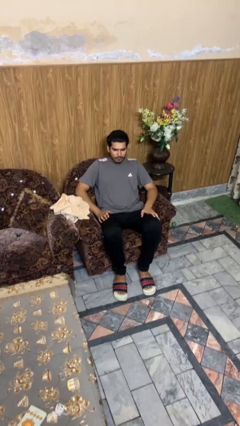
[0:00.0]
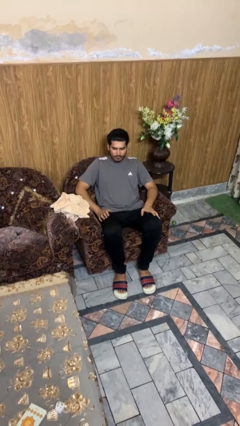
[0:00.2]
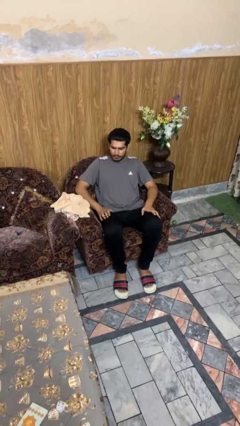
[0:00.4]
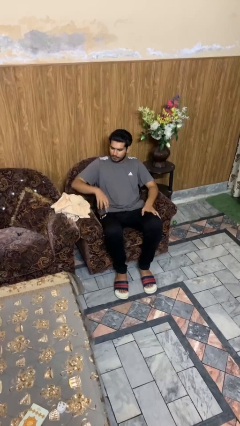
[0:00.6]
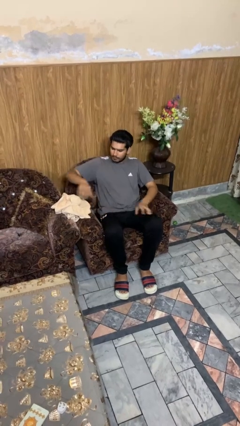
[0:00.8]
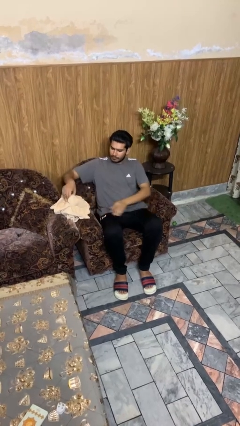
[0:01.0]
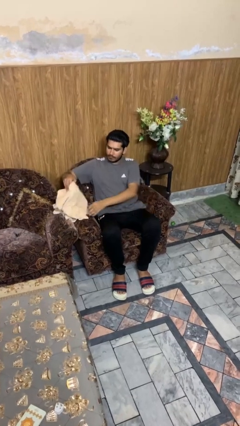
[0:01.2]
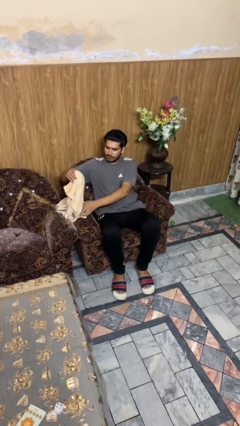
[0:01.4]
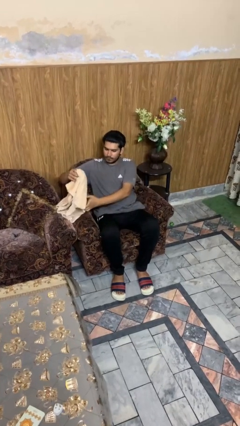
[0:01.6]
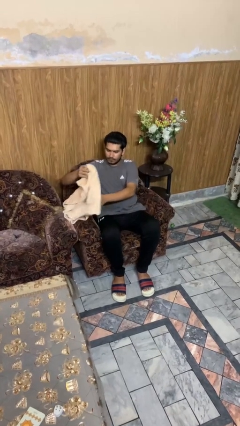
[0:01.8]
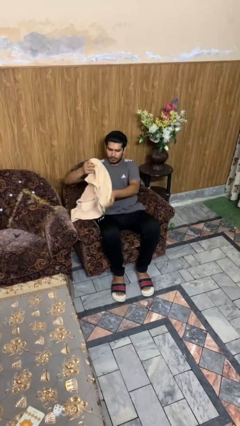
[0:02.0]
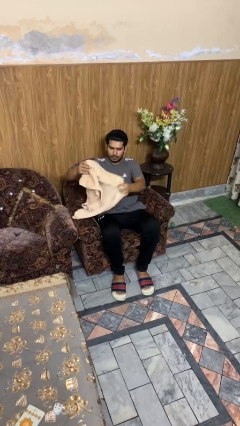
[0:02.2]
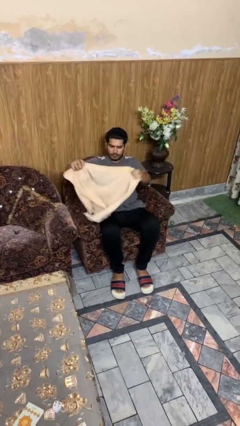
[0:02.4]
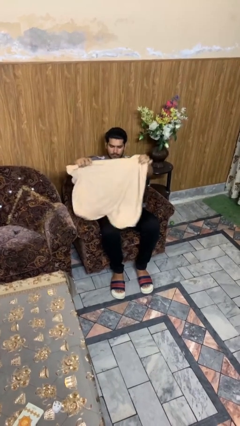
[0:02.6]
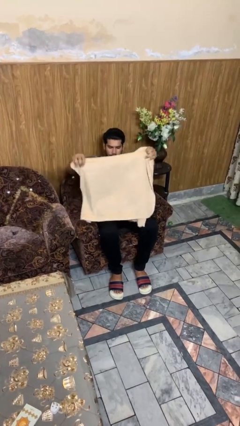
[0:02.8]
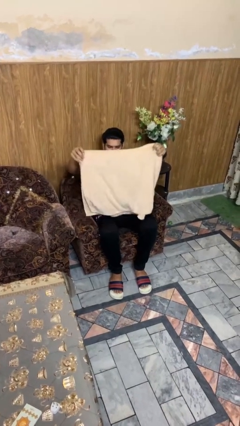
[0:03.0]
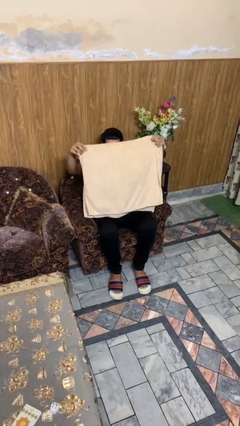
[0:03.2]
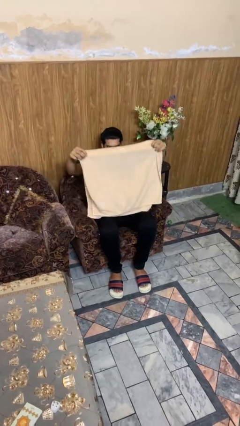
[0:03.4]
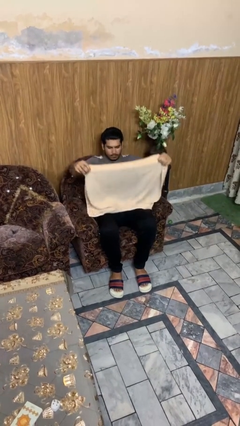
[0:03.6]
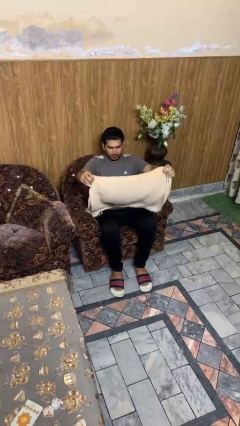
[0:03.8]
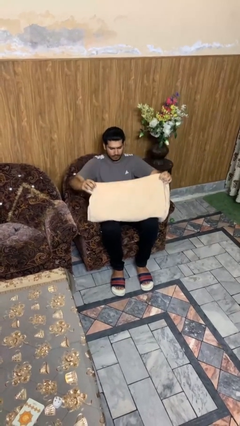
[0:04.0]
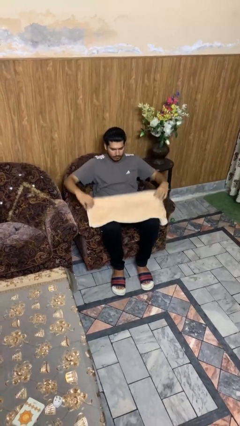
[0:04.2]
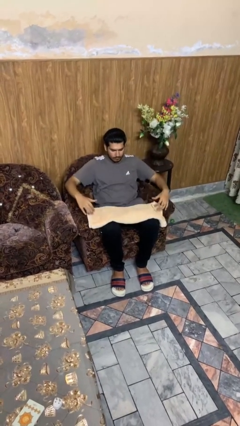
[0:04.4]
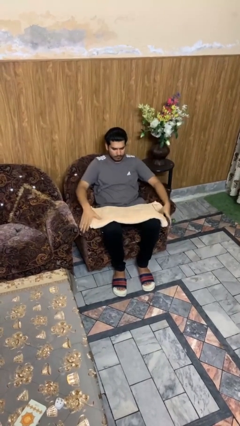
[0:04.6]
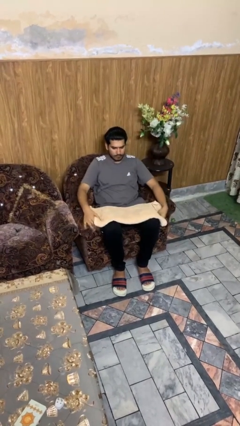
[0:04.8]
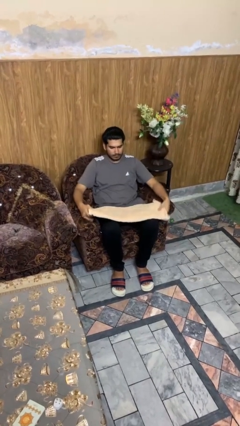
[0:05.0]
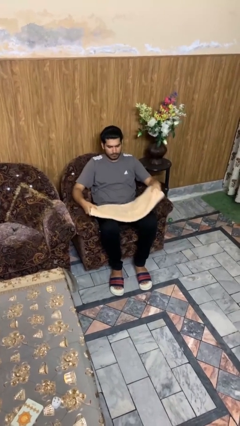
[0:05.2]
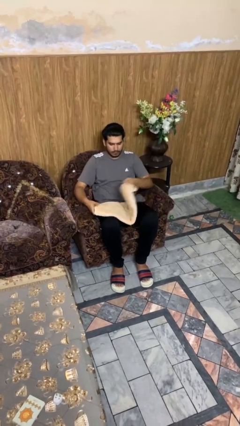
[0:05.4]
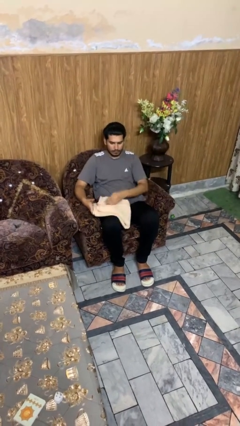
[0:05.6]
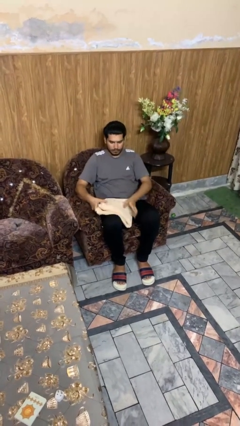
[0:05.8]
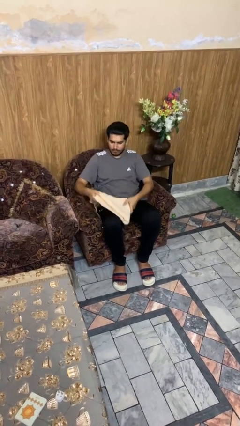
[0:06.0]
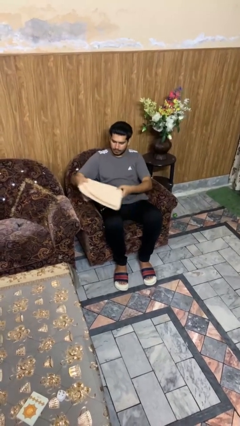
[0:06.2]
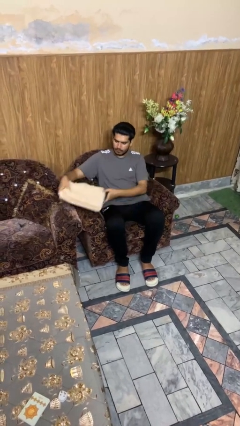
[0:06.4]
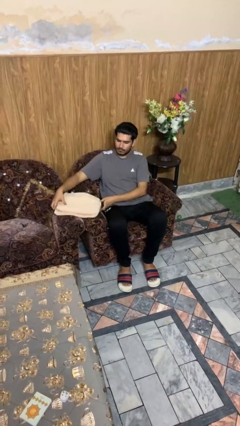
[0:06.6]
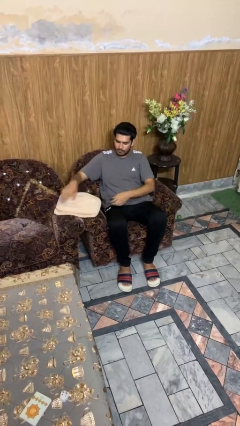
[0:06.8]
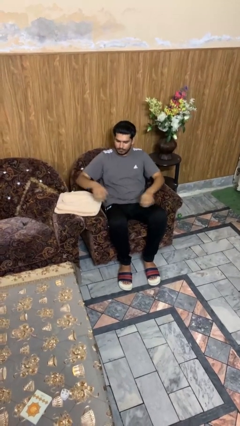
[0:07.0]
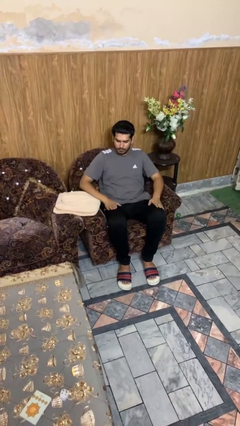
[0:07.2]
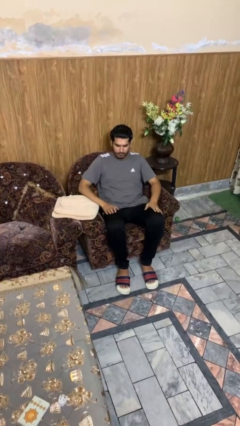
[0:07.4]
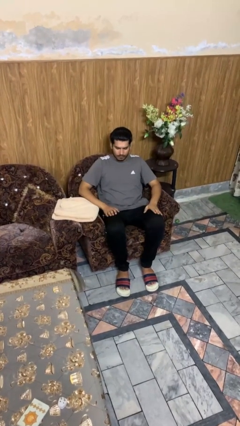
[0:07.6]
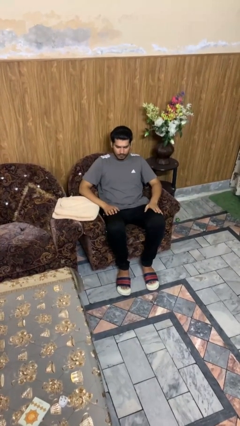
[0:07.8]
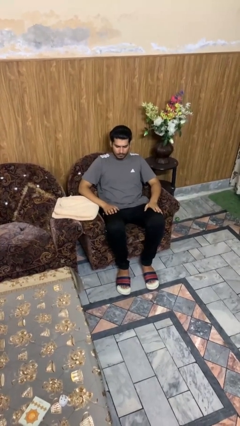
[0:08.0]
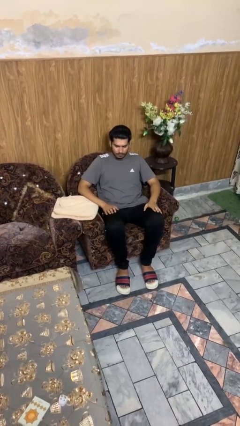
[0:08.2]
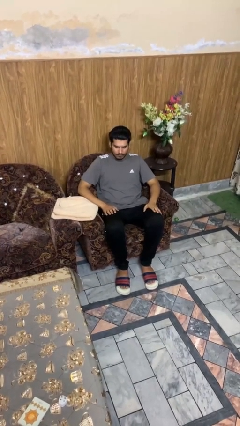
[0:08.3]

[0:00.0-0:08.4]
person folds towel

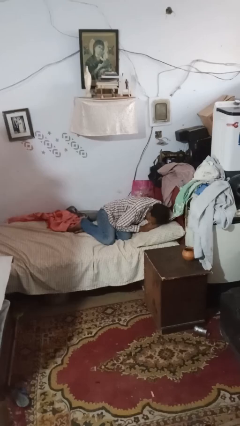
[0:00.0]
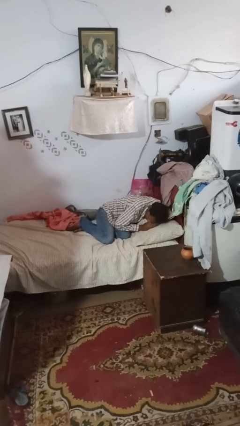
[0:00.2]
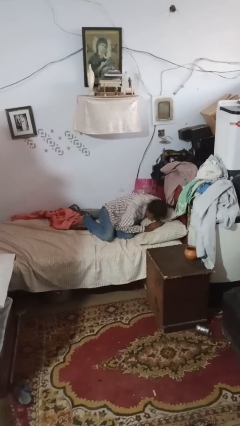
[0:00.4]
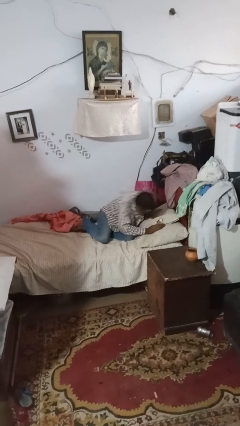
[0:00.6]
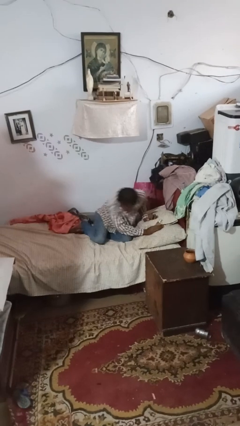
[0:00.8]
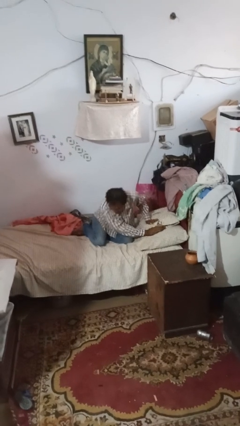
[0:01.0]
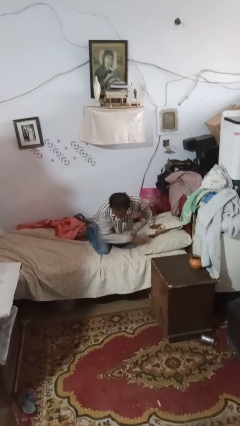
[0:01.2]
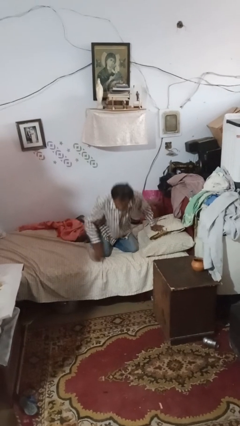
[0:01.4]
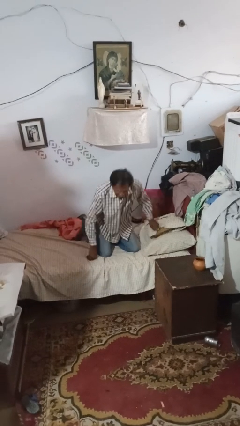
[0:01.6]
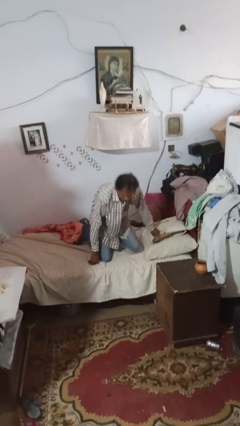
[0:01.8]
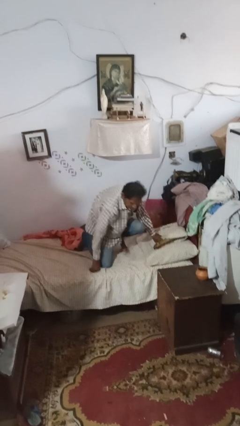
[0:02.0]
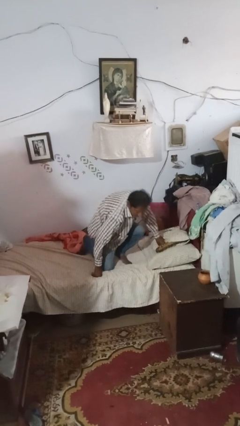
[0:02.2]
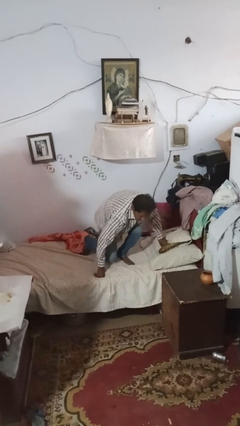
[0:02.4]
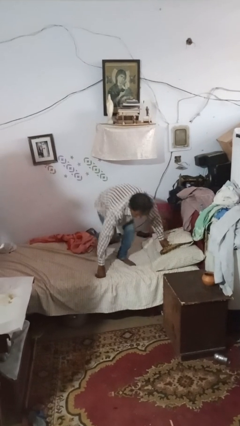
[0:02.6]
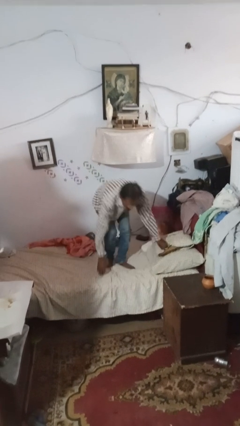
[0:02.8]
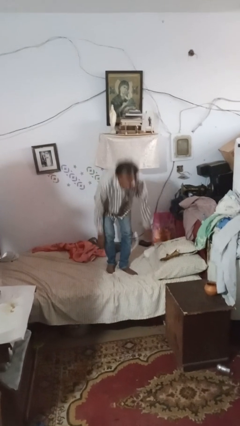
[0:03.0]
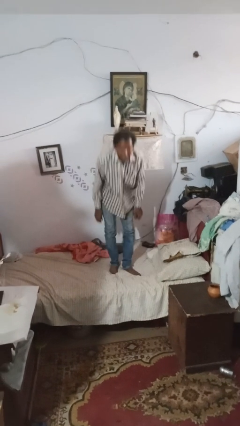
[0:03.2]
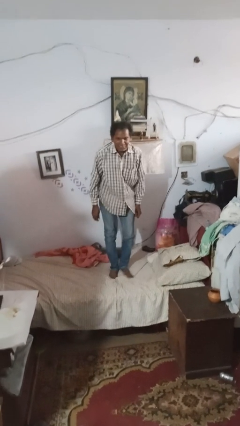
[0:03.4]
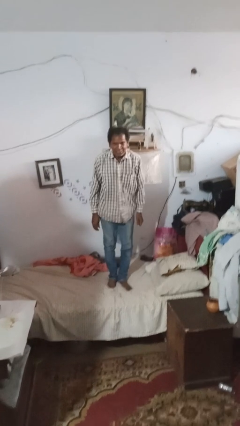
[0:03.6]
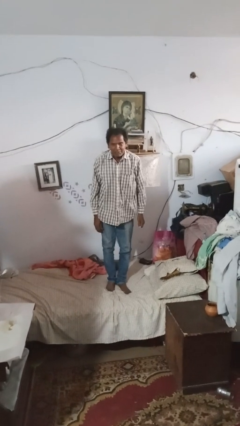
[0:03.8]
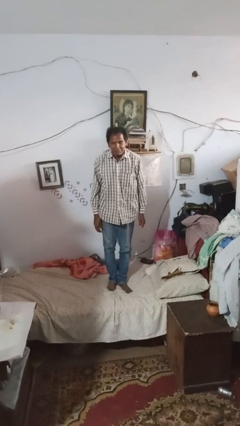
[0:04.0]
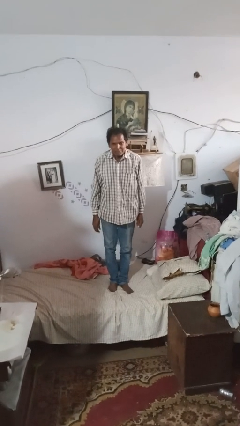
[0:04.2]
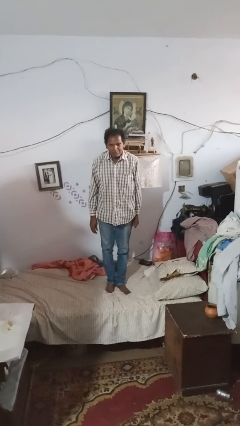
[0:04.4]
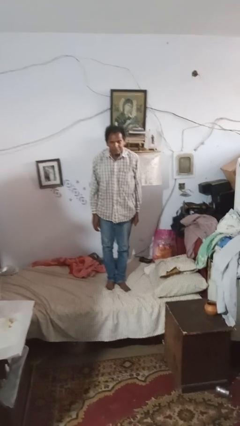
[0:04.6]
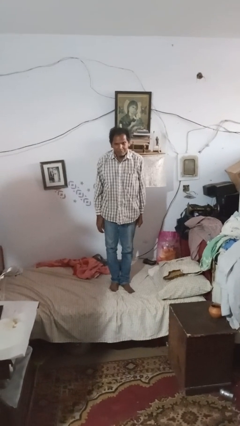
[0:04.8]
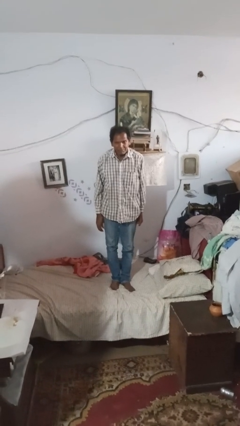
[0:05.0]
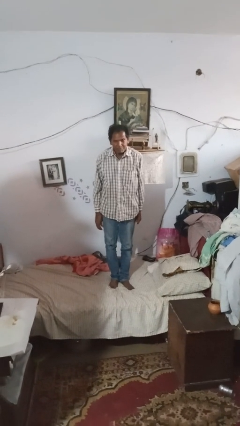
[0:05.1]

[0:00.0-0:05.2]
person stands up

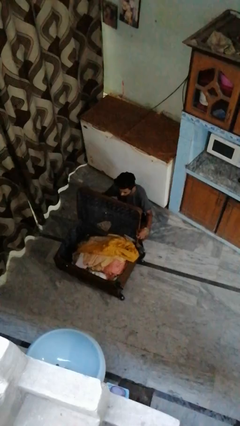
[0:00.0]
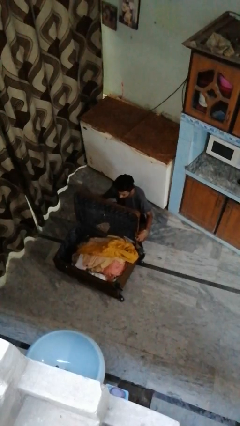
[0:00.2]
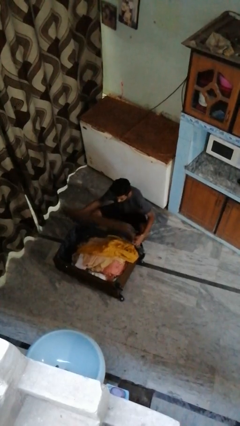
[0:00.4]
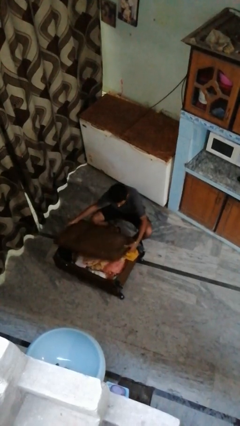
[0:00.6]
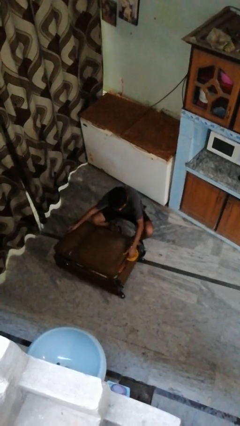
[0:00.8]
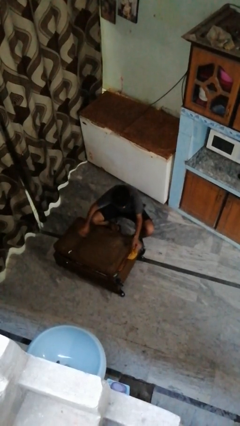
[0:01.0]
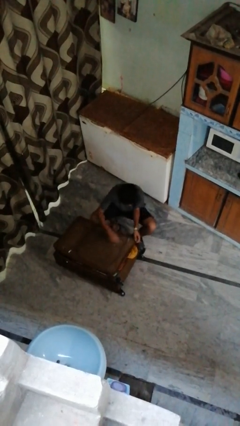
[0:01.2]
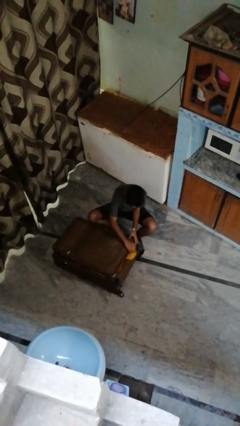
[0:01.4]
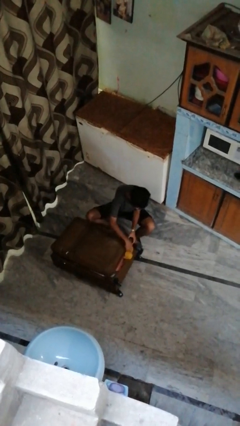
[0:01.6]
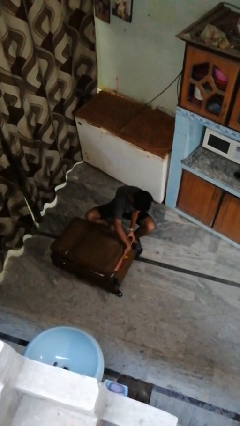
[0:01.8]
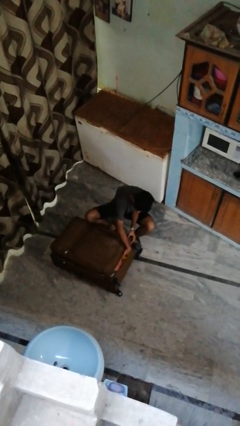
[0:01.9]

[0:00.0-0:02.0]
person closes suitcase

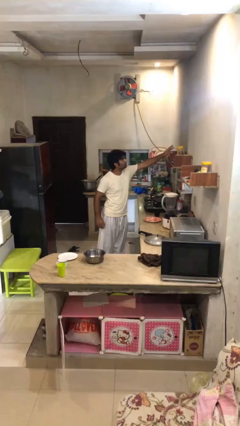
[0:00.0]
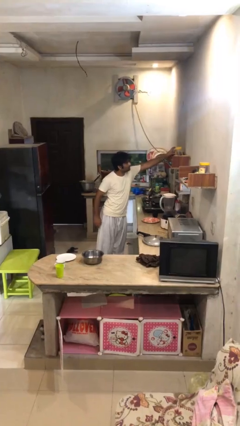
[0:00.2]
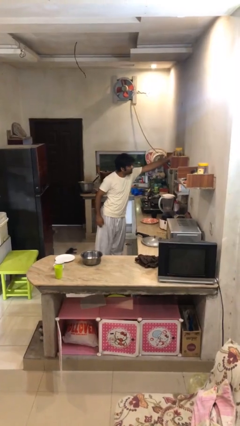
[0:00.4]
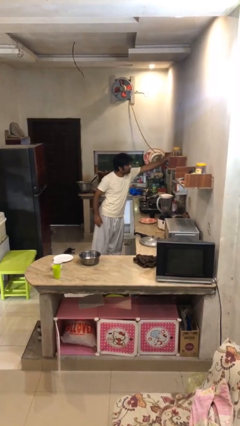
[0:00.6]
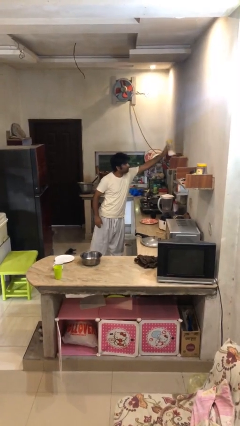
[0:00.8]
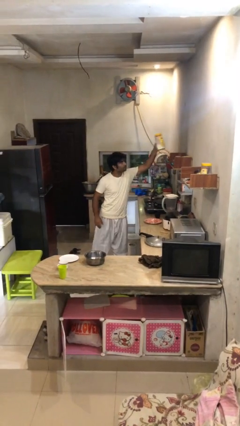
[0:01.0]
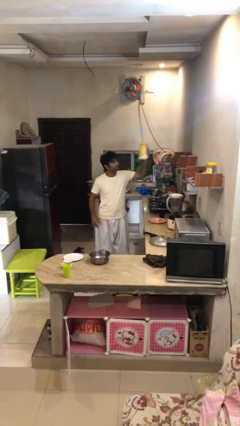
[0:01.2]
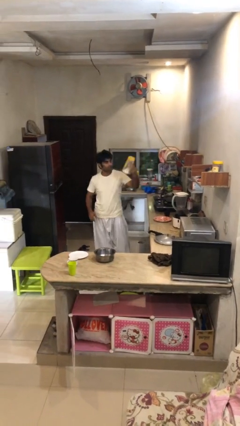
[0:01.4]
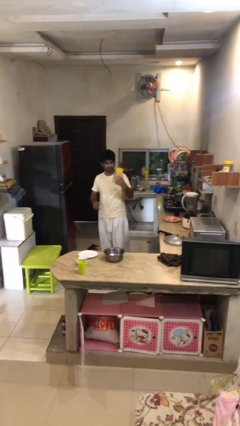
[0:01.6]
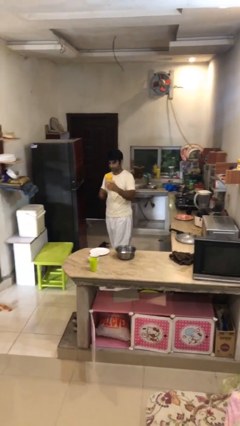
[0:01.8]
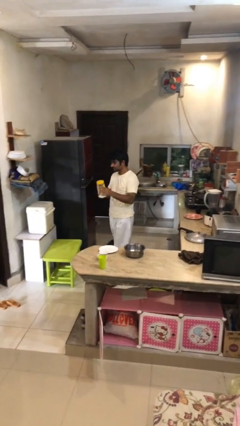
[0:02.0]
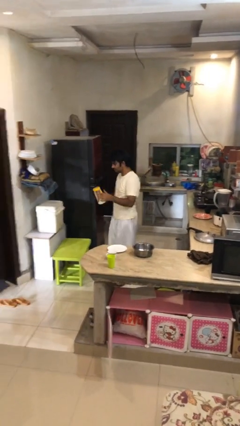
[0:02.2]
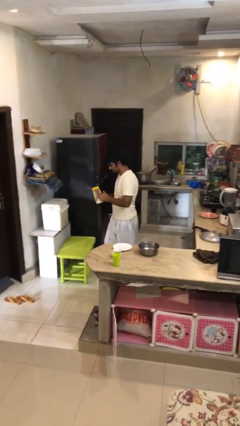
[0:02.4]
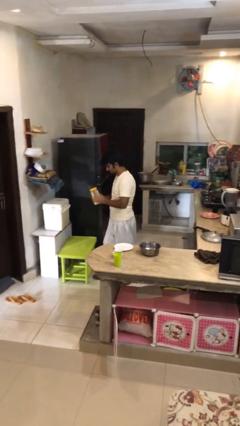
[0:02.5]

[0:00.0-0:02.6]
person picks up object from shelf

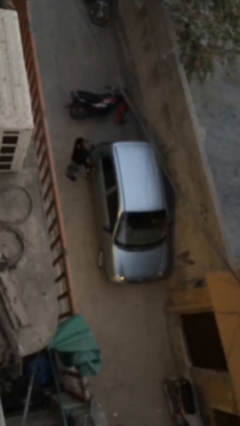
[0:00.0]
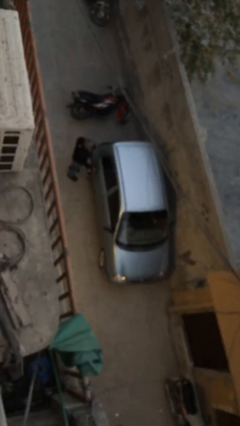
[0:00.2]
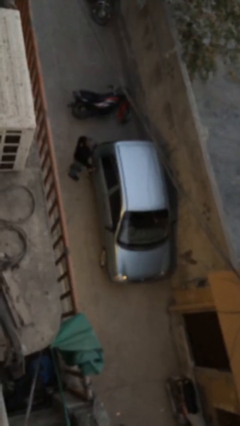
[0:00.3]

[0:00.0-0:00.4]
car picks up person
